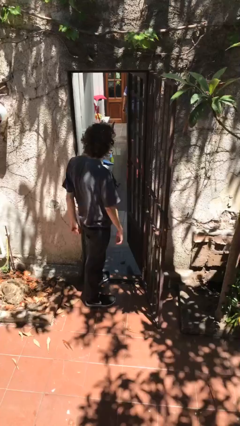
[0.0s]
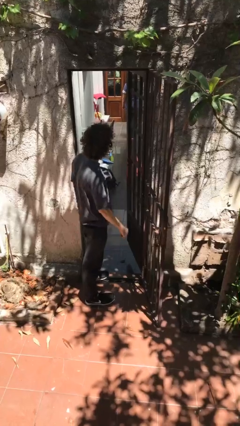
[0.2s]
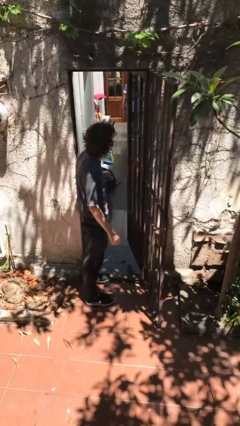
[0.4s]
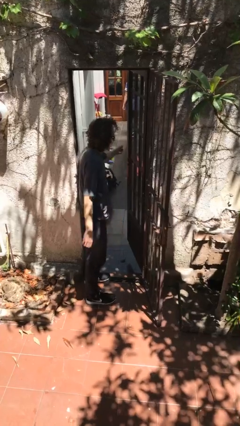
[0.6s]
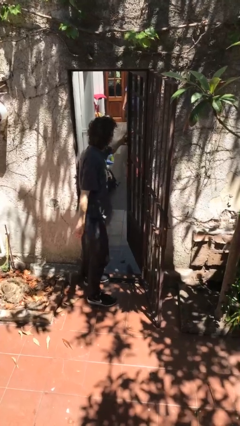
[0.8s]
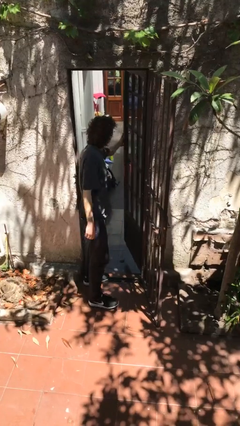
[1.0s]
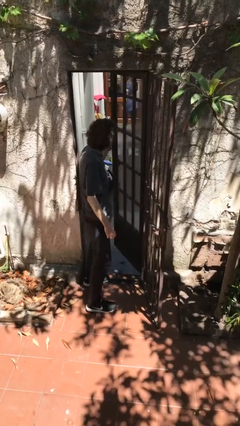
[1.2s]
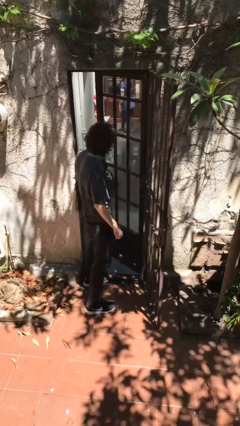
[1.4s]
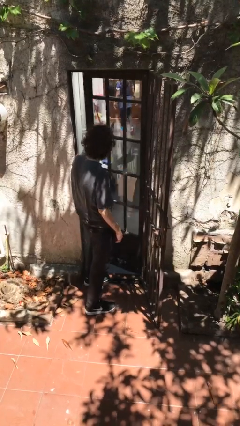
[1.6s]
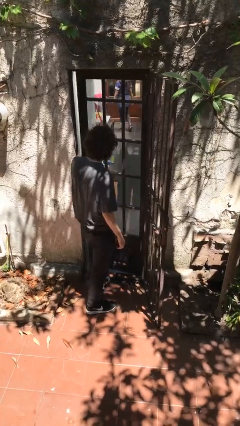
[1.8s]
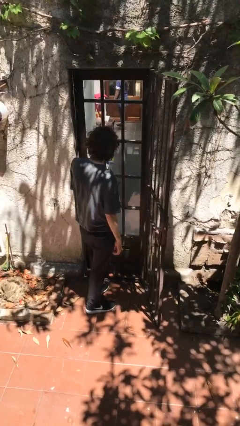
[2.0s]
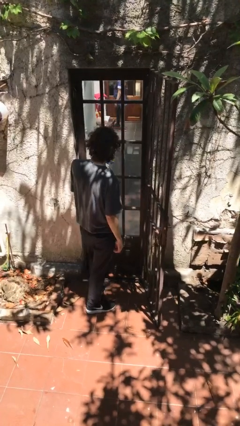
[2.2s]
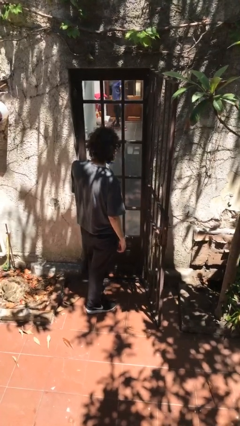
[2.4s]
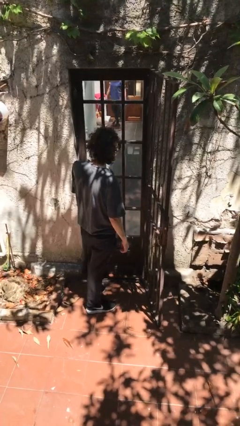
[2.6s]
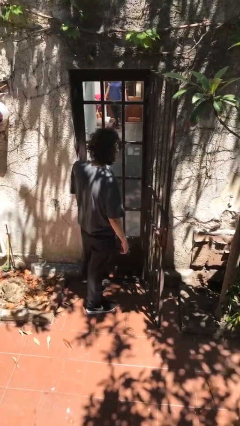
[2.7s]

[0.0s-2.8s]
person closes facility door

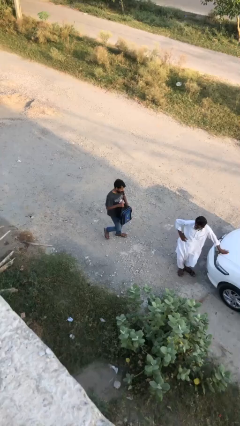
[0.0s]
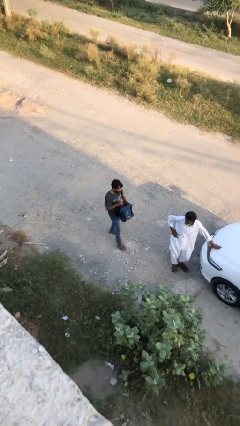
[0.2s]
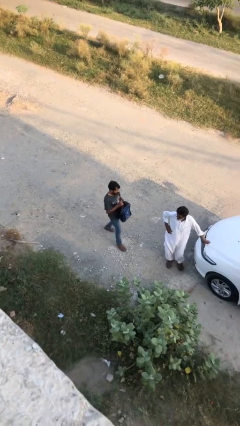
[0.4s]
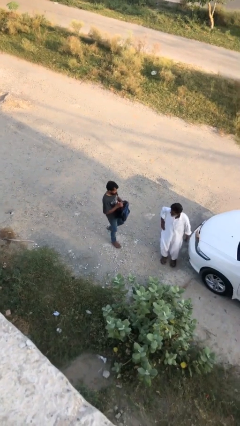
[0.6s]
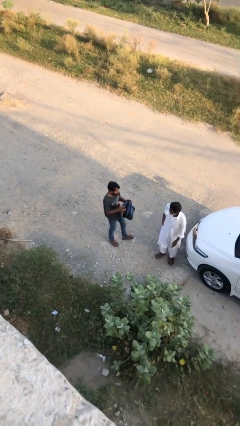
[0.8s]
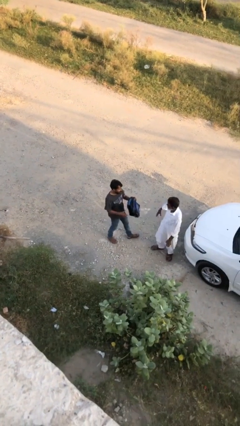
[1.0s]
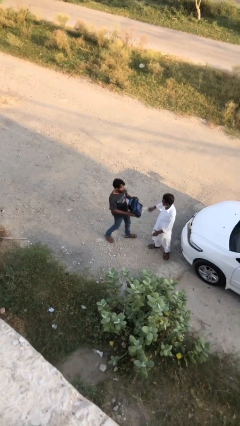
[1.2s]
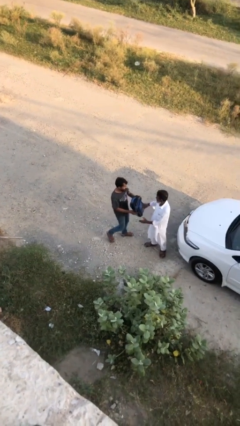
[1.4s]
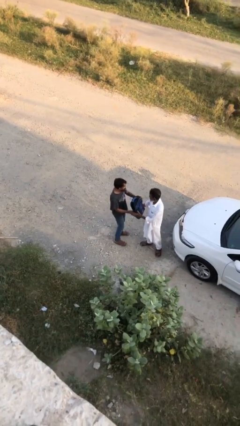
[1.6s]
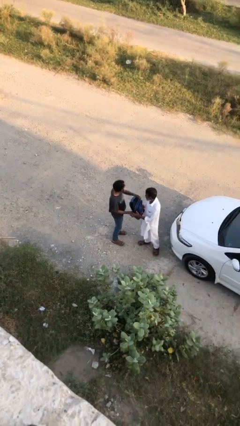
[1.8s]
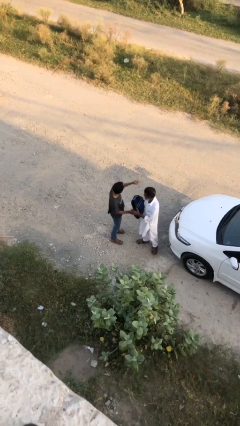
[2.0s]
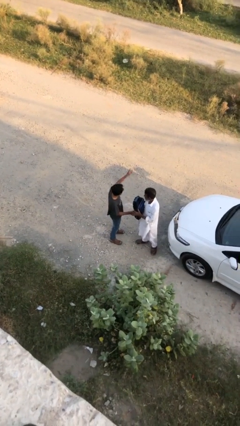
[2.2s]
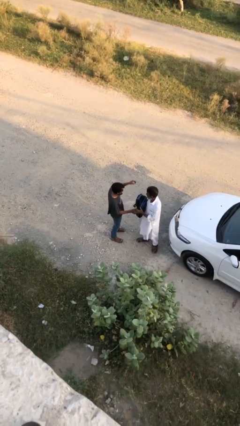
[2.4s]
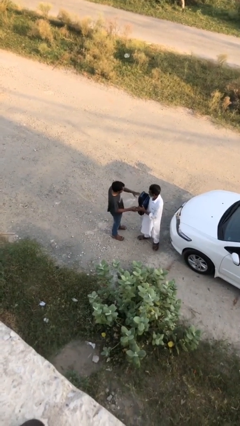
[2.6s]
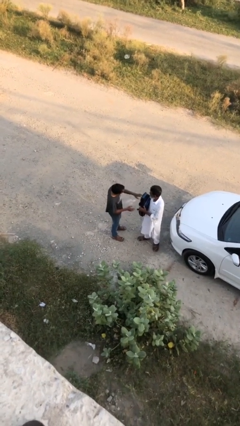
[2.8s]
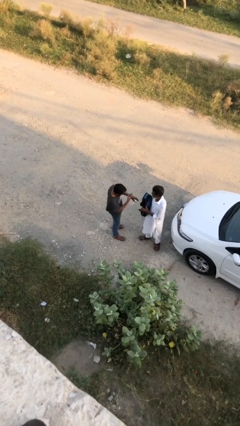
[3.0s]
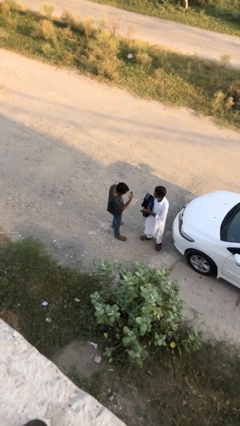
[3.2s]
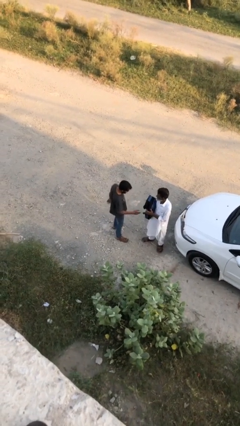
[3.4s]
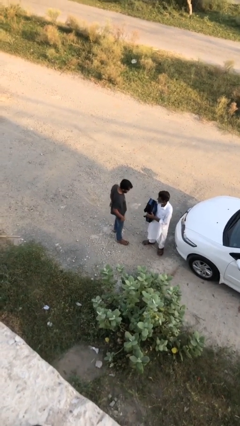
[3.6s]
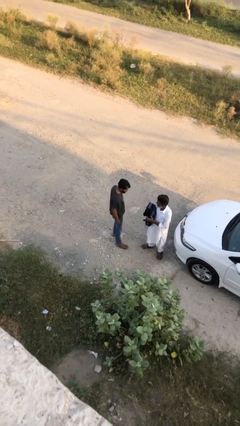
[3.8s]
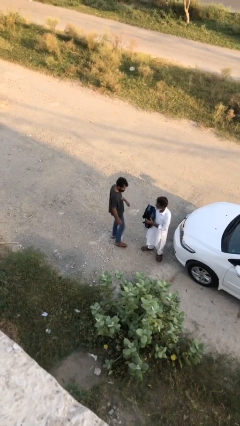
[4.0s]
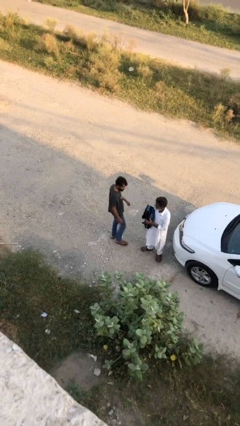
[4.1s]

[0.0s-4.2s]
person transfers object to person

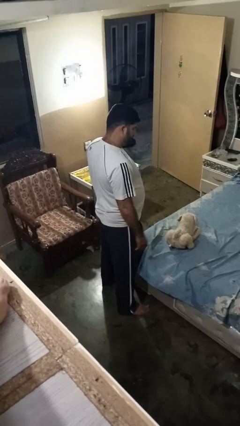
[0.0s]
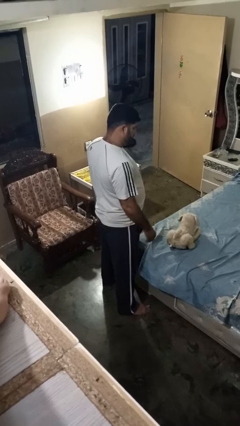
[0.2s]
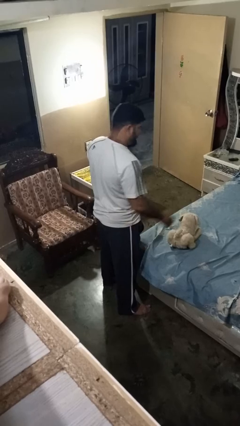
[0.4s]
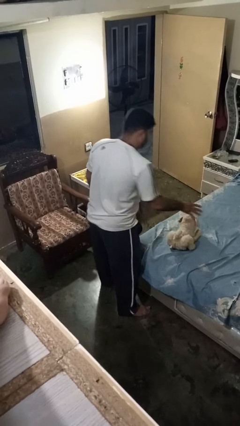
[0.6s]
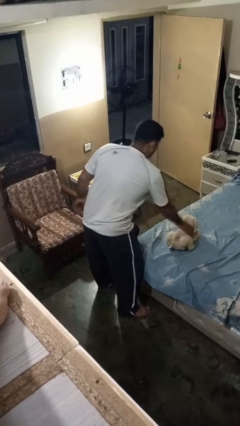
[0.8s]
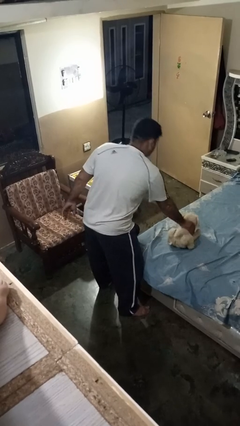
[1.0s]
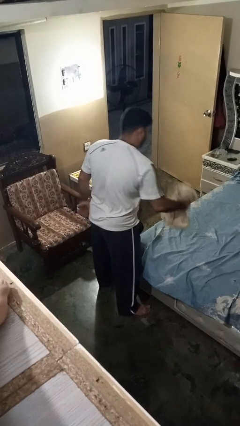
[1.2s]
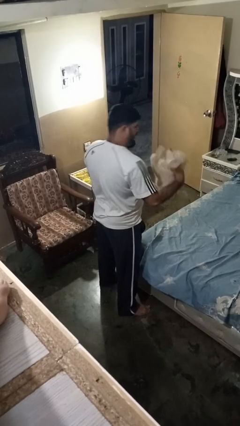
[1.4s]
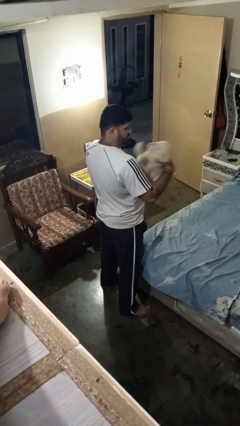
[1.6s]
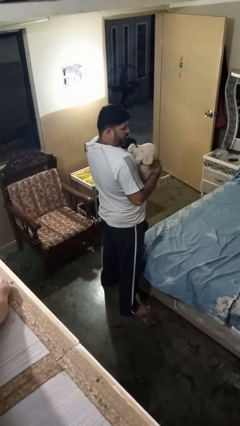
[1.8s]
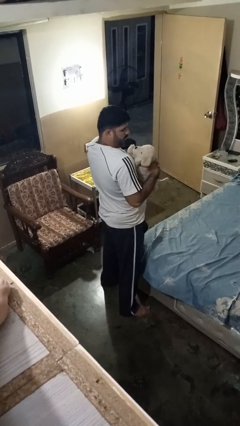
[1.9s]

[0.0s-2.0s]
person hugs stuffed animal

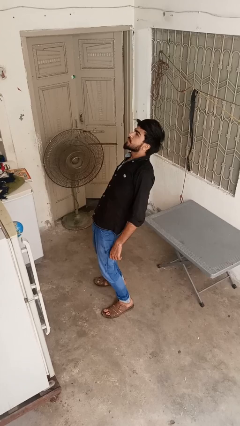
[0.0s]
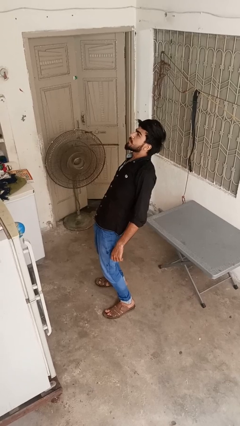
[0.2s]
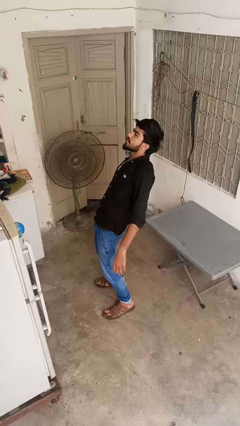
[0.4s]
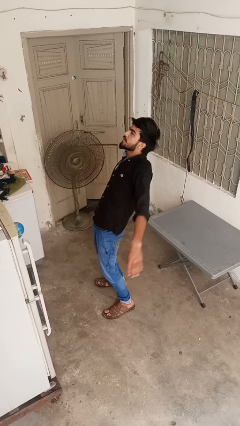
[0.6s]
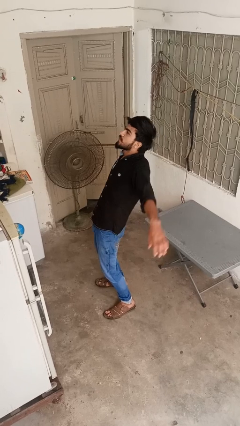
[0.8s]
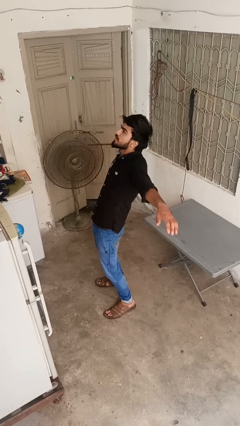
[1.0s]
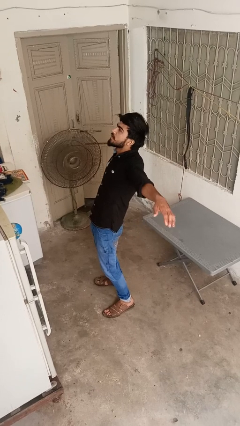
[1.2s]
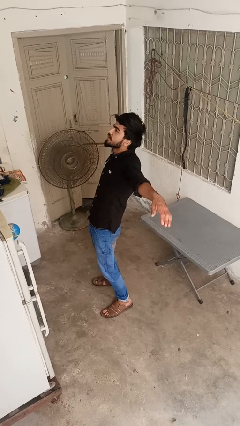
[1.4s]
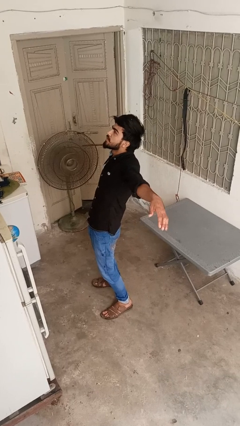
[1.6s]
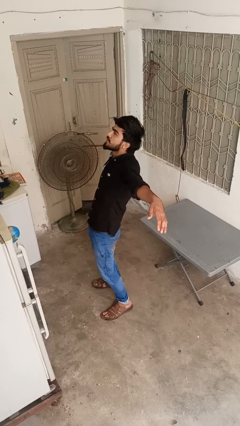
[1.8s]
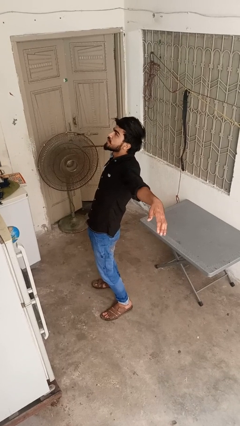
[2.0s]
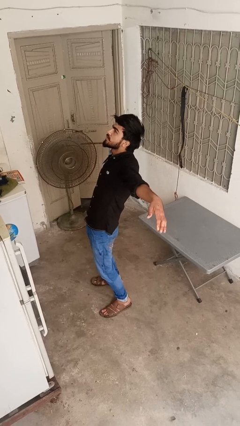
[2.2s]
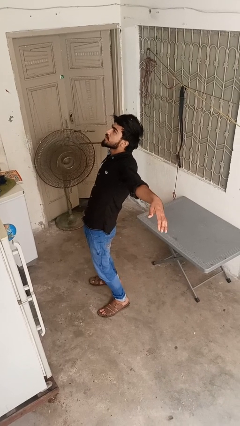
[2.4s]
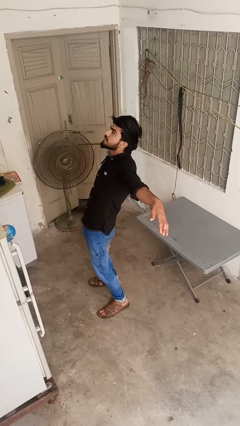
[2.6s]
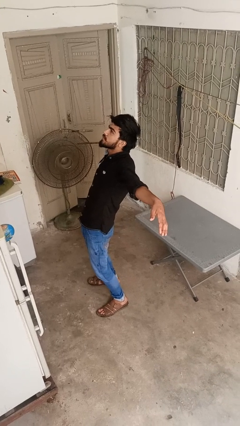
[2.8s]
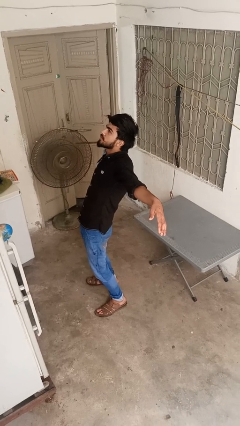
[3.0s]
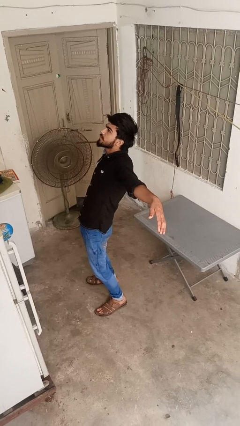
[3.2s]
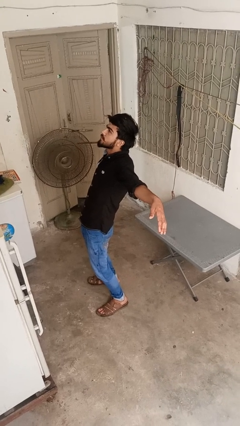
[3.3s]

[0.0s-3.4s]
person stretches arms to side

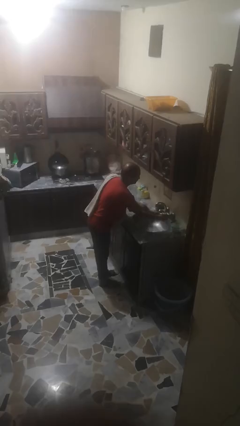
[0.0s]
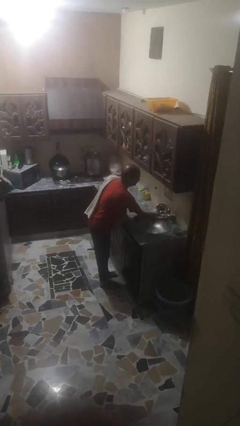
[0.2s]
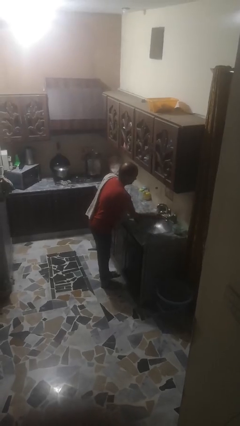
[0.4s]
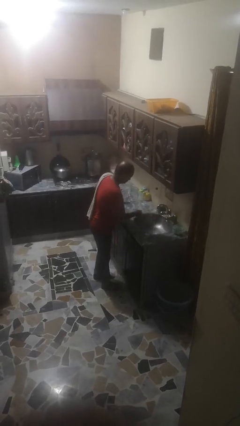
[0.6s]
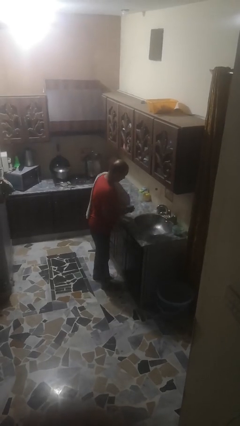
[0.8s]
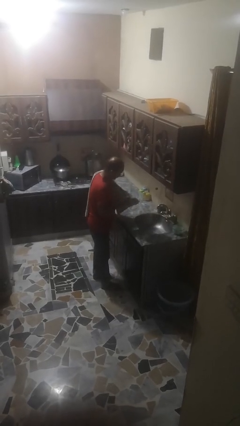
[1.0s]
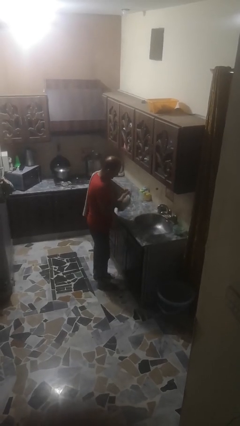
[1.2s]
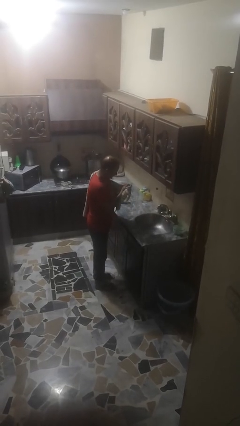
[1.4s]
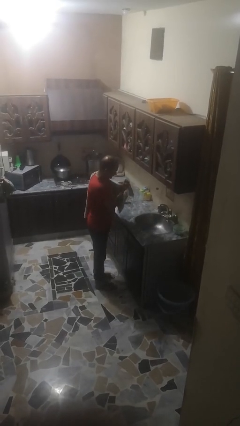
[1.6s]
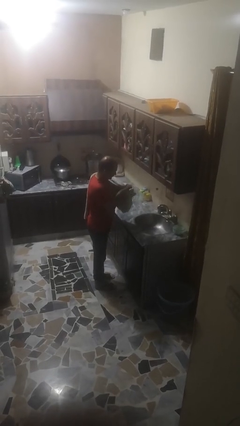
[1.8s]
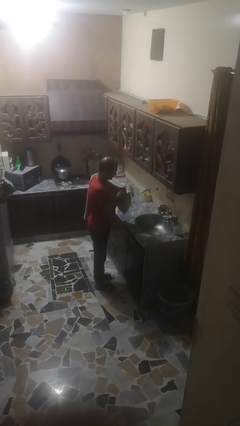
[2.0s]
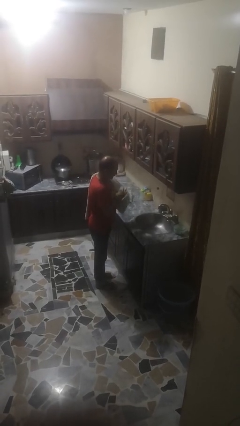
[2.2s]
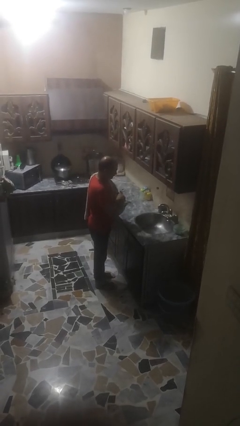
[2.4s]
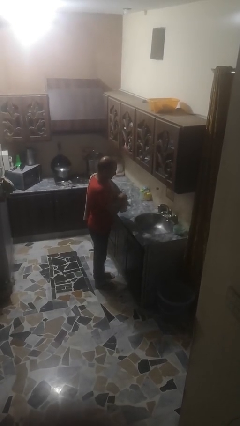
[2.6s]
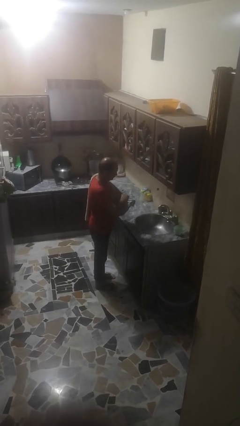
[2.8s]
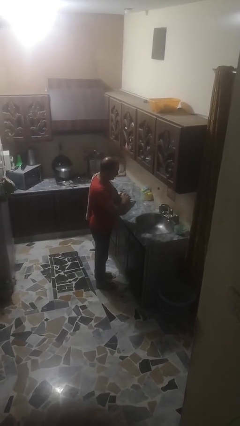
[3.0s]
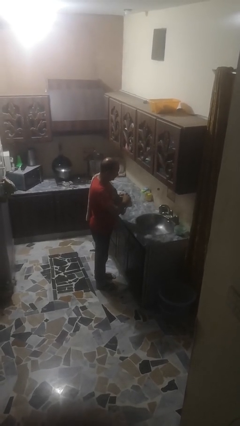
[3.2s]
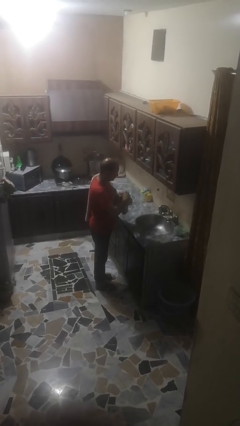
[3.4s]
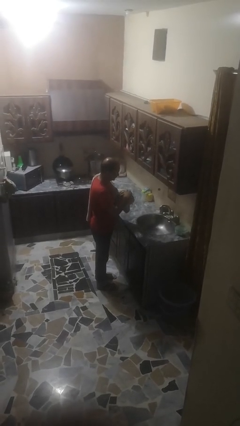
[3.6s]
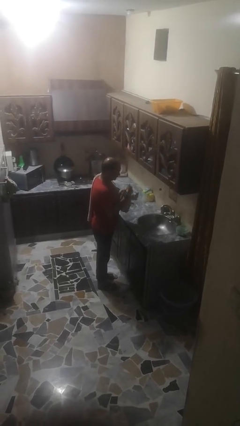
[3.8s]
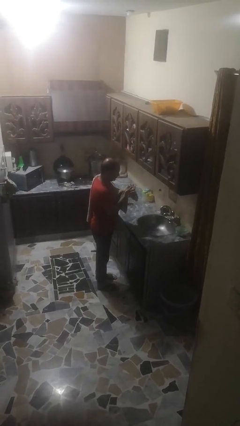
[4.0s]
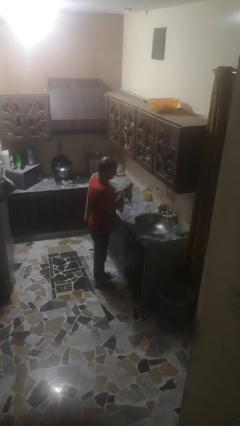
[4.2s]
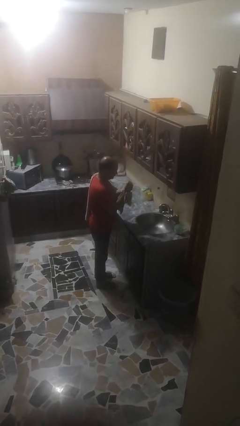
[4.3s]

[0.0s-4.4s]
person dries hands with towel

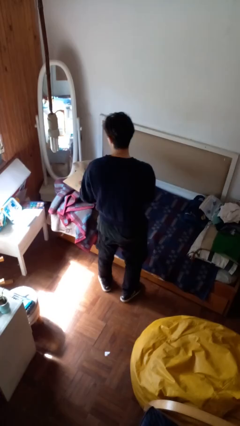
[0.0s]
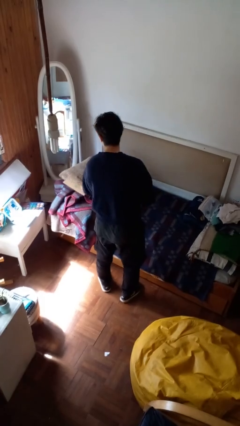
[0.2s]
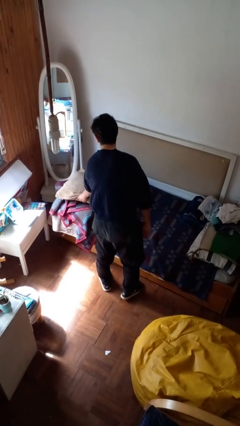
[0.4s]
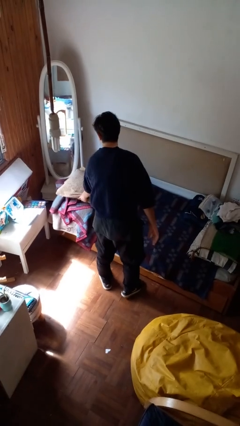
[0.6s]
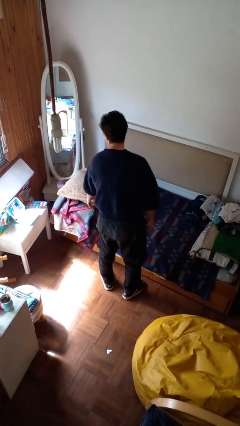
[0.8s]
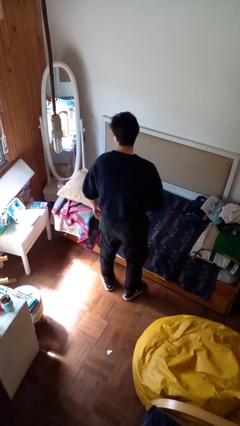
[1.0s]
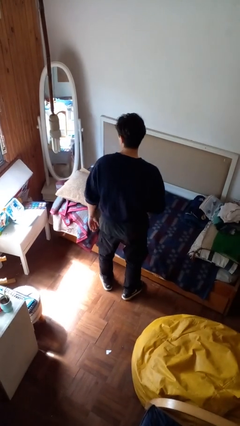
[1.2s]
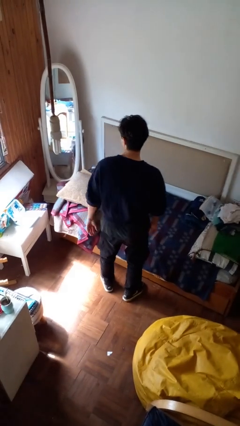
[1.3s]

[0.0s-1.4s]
person puts down object on bed
